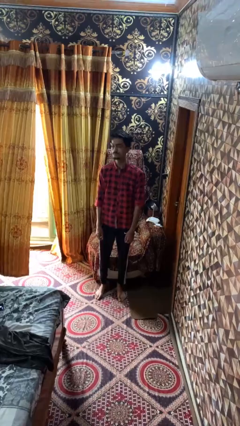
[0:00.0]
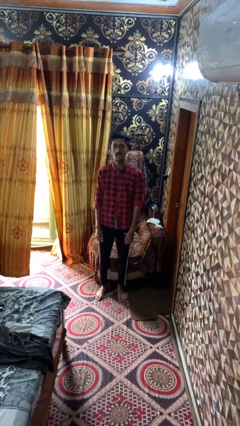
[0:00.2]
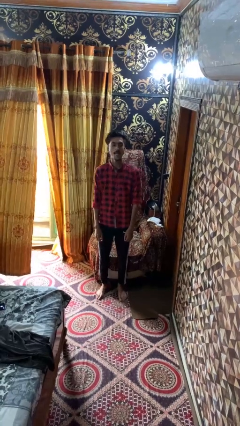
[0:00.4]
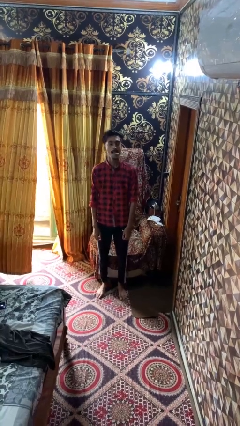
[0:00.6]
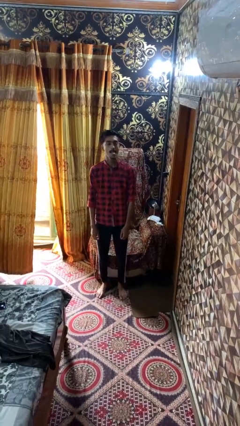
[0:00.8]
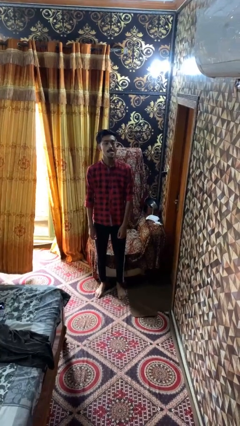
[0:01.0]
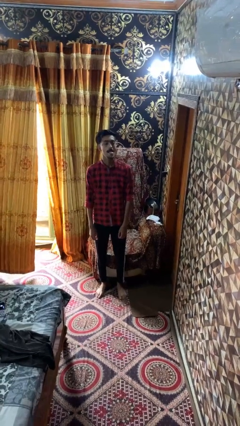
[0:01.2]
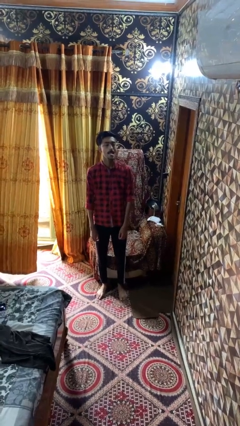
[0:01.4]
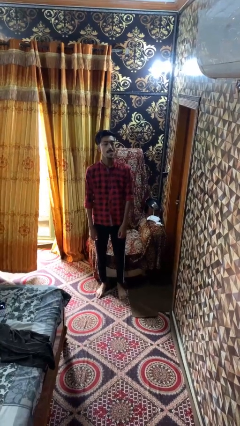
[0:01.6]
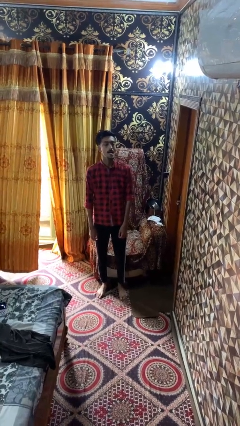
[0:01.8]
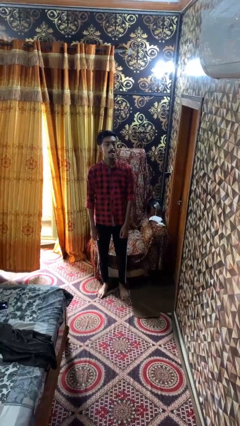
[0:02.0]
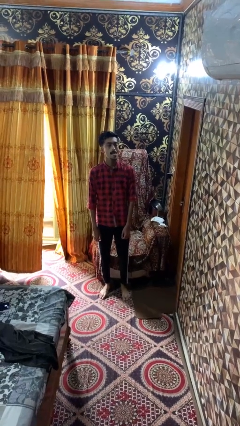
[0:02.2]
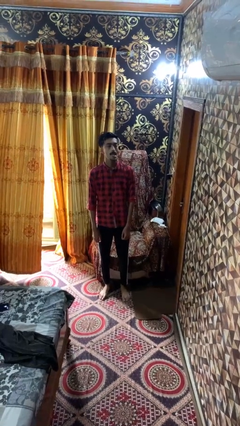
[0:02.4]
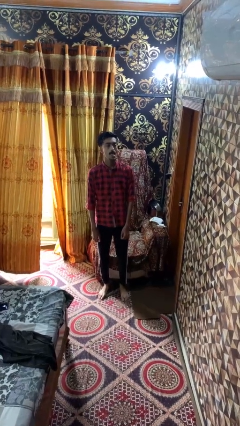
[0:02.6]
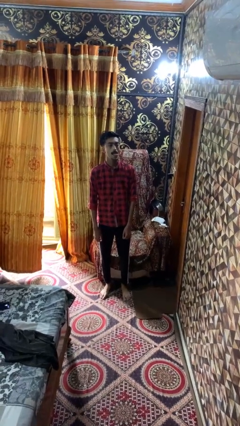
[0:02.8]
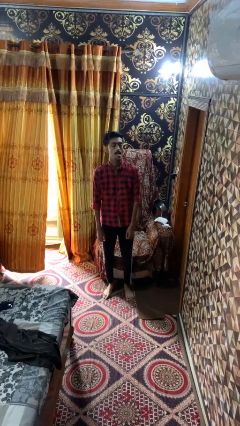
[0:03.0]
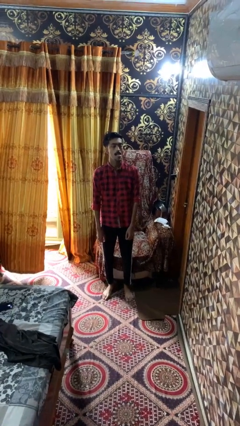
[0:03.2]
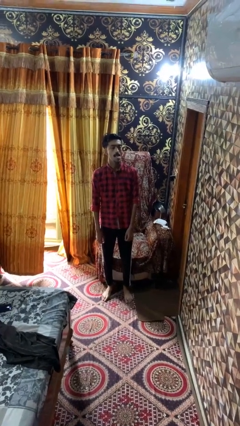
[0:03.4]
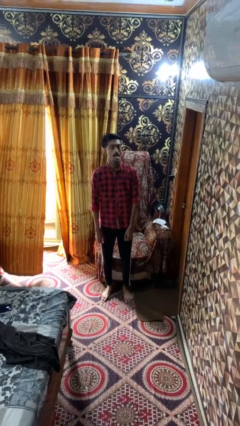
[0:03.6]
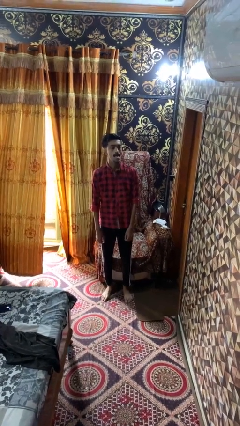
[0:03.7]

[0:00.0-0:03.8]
person sticks out tongue

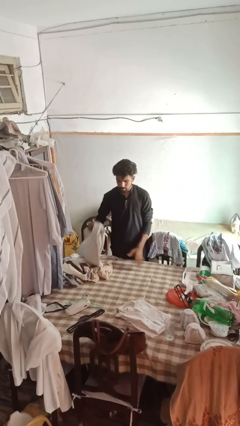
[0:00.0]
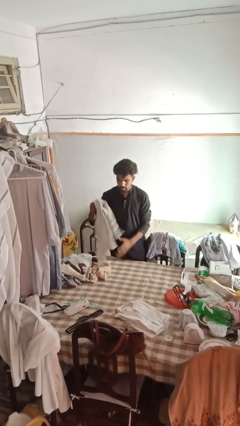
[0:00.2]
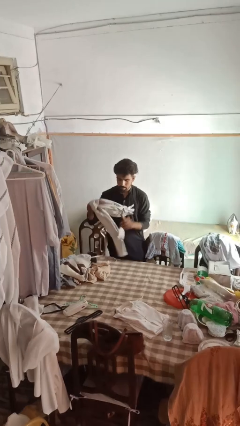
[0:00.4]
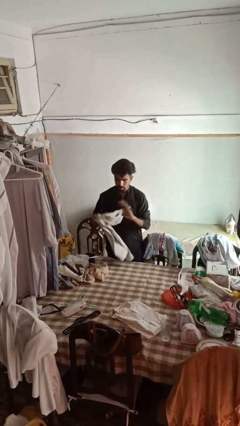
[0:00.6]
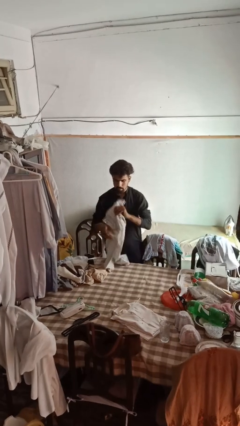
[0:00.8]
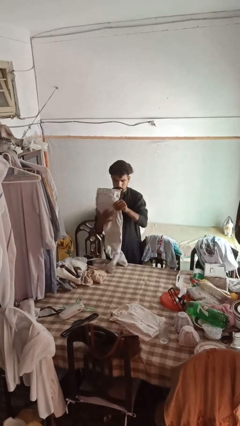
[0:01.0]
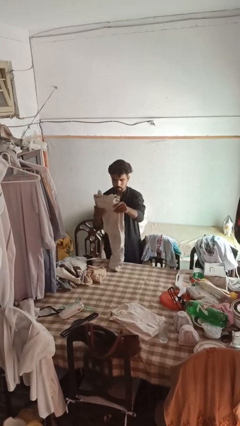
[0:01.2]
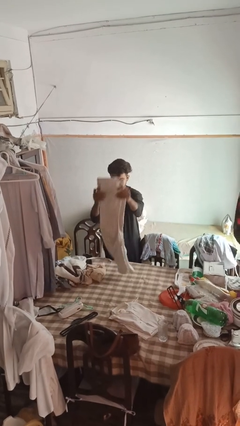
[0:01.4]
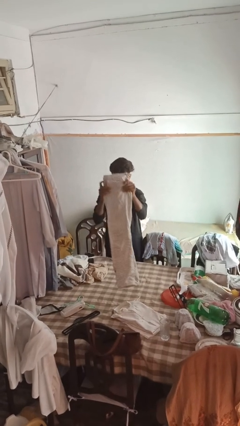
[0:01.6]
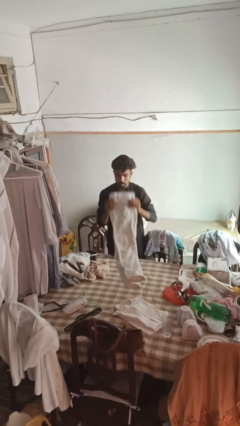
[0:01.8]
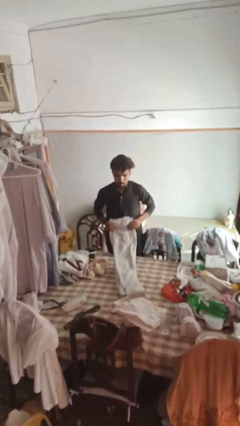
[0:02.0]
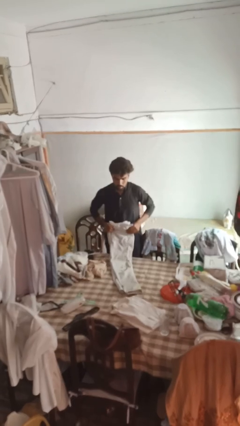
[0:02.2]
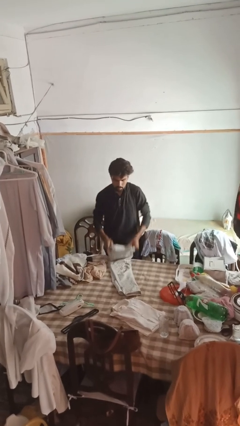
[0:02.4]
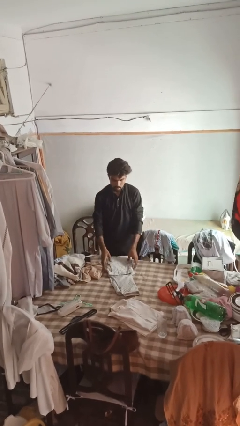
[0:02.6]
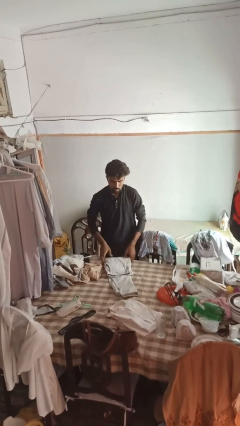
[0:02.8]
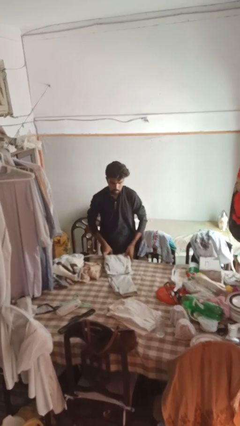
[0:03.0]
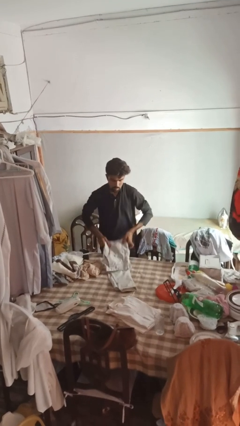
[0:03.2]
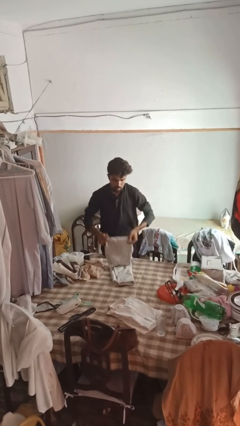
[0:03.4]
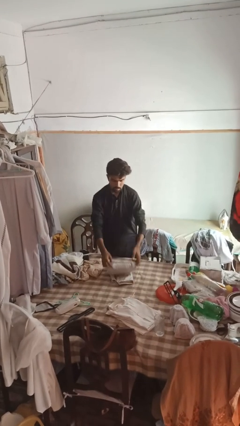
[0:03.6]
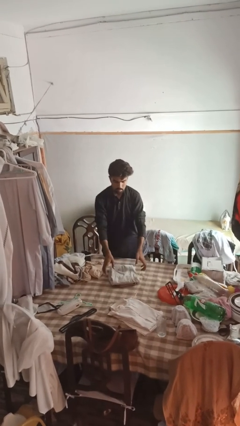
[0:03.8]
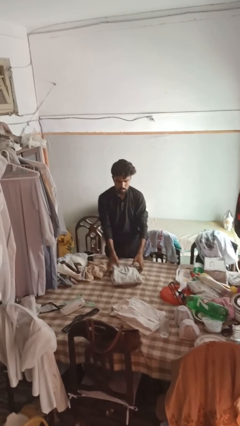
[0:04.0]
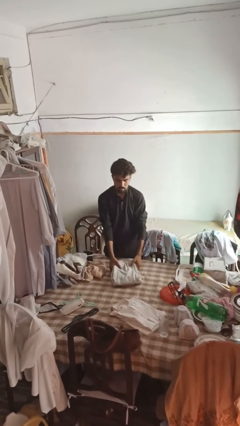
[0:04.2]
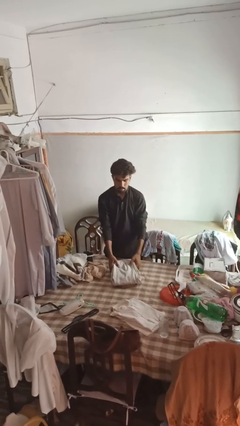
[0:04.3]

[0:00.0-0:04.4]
person folds socks

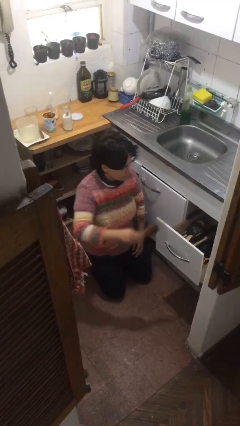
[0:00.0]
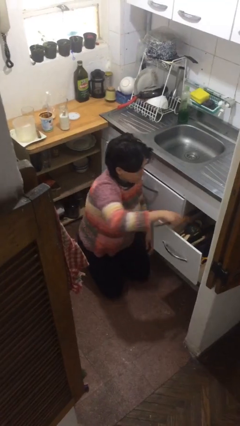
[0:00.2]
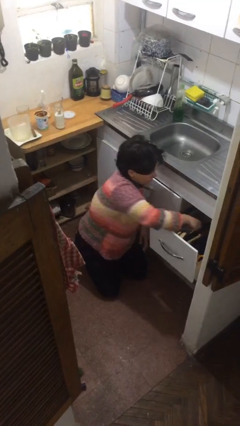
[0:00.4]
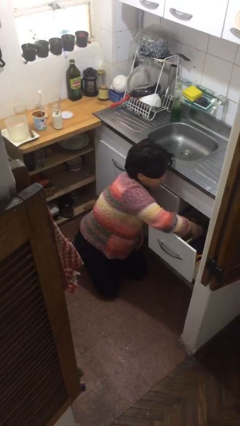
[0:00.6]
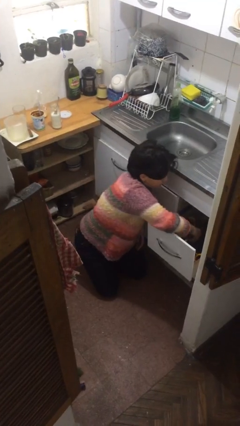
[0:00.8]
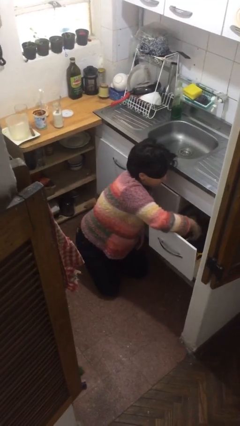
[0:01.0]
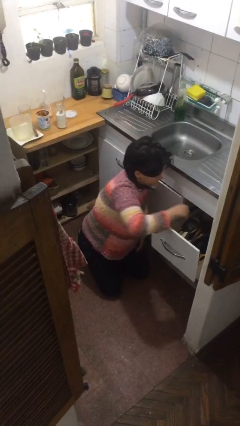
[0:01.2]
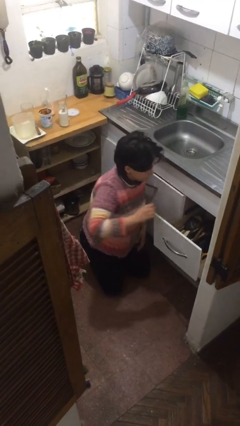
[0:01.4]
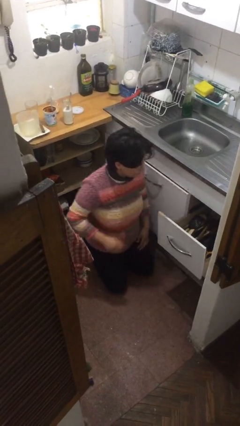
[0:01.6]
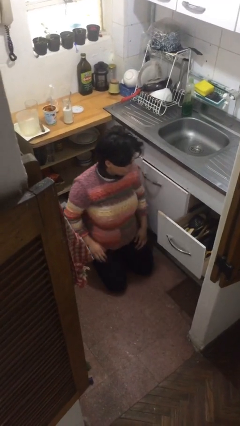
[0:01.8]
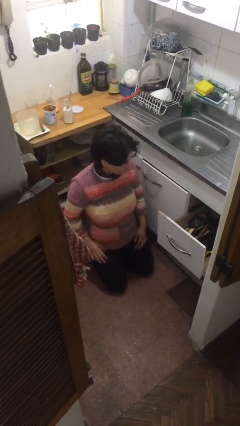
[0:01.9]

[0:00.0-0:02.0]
person puts object into kitchen drawer

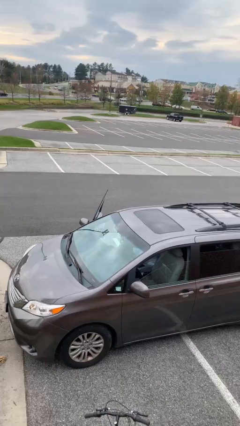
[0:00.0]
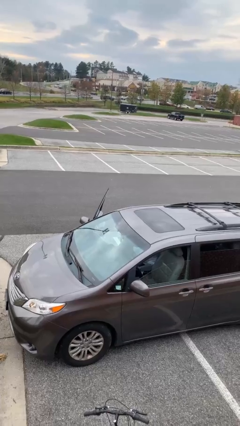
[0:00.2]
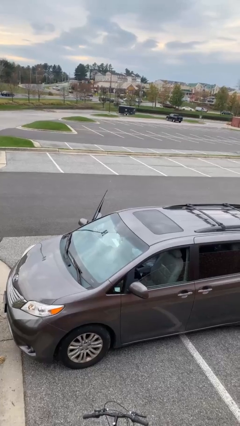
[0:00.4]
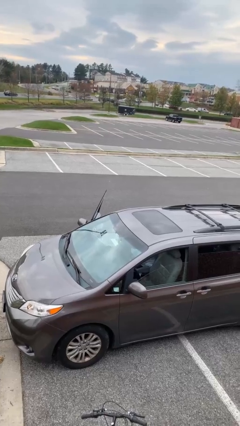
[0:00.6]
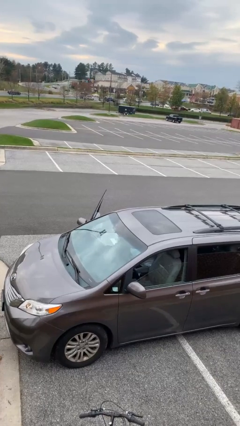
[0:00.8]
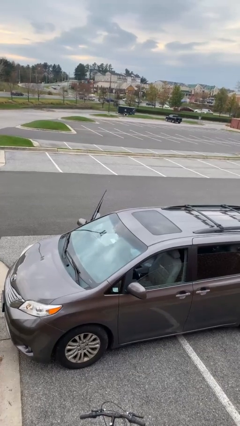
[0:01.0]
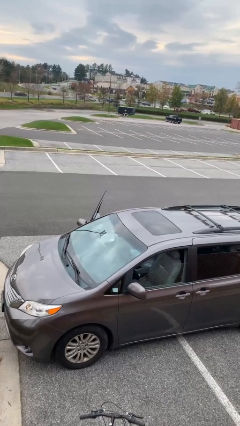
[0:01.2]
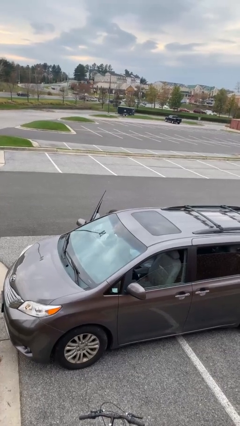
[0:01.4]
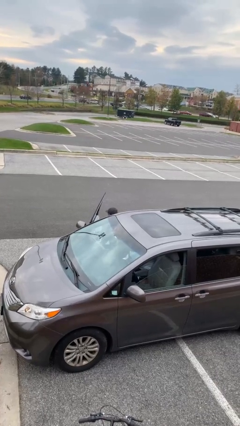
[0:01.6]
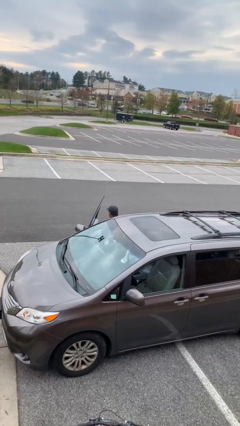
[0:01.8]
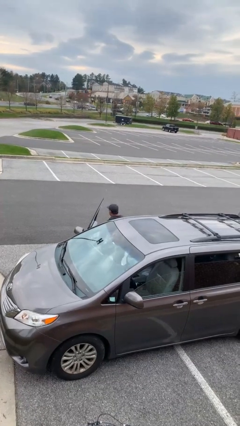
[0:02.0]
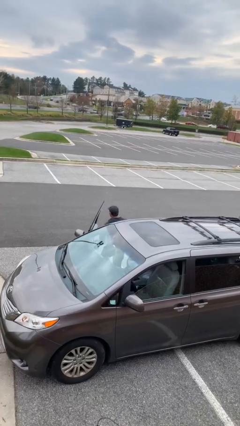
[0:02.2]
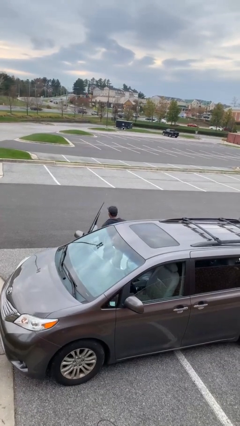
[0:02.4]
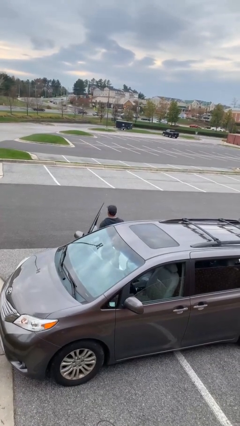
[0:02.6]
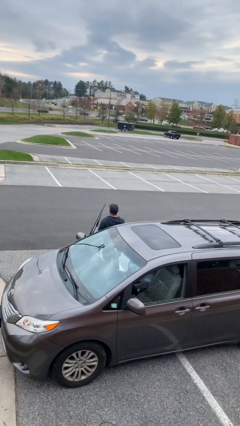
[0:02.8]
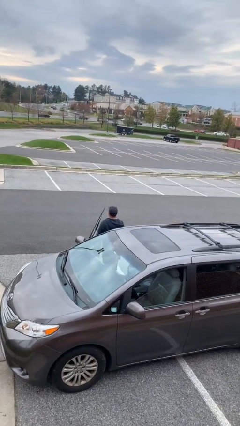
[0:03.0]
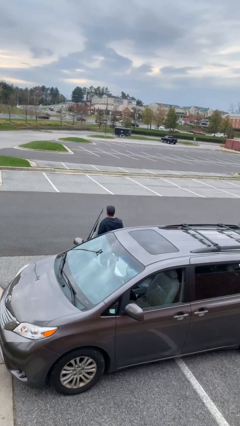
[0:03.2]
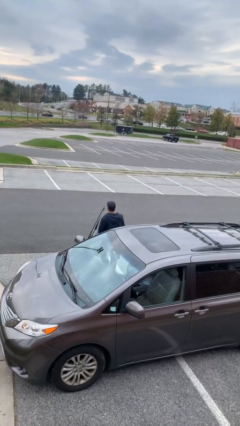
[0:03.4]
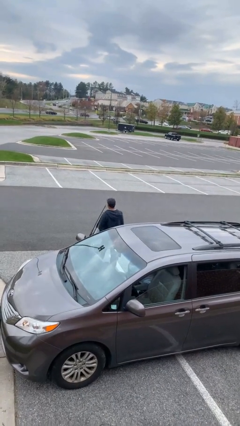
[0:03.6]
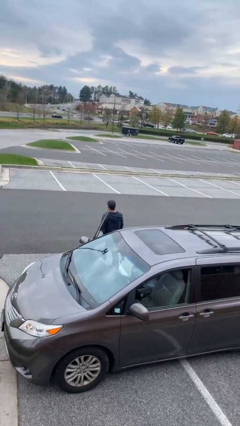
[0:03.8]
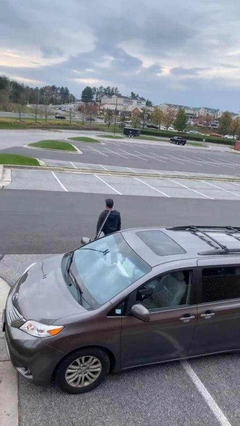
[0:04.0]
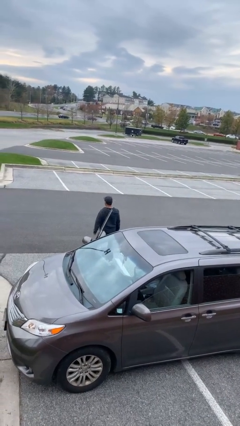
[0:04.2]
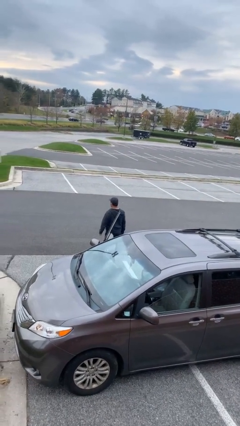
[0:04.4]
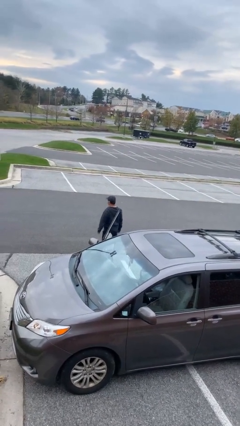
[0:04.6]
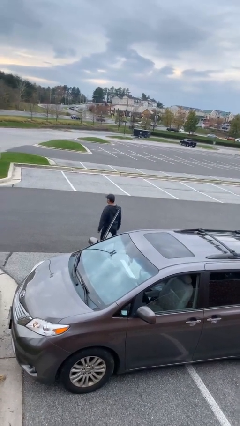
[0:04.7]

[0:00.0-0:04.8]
person exits car

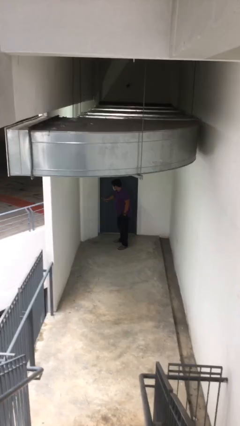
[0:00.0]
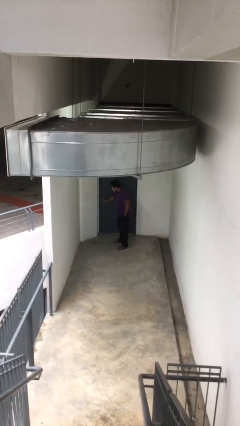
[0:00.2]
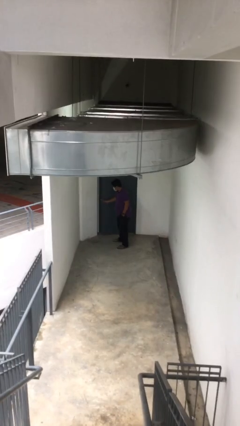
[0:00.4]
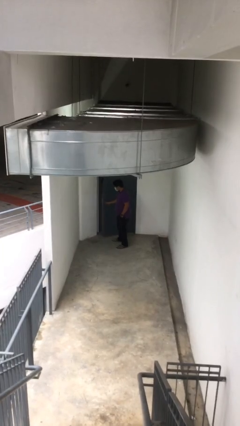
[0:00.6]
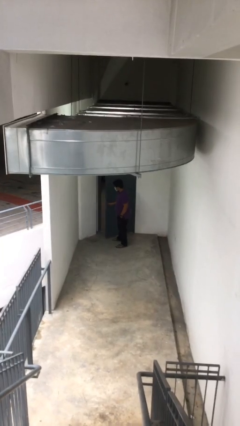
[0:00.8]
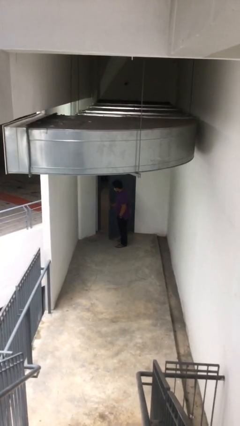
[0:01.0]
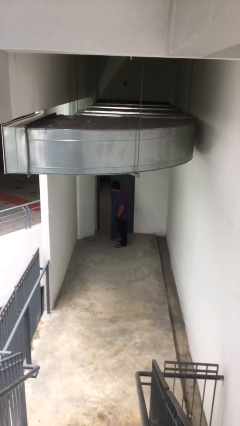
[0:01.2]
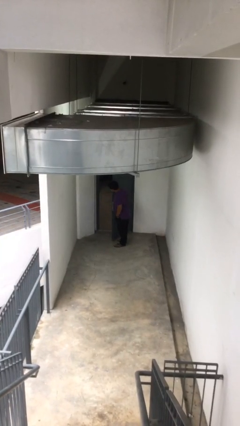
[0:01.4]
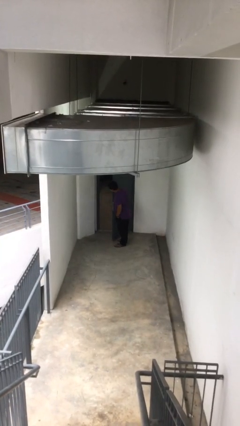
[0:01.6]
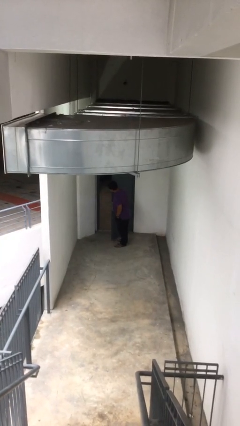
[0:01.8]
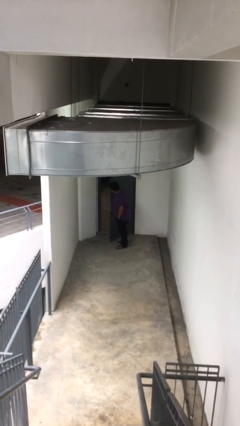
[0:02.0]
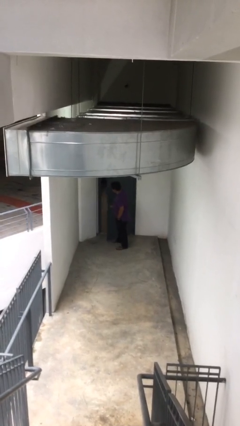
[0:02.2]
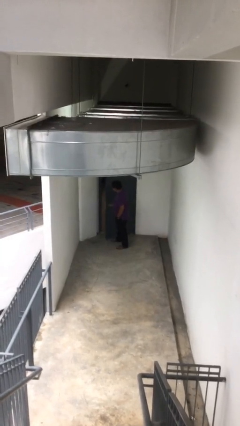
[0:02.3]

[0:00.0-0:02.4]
person opens facility door

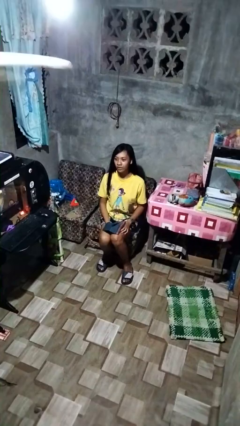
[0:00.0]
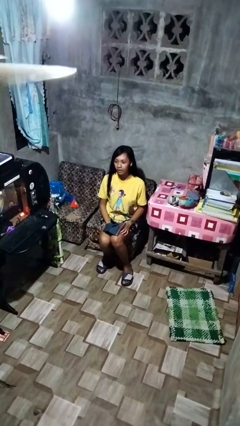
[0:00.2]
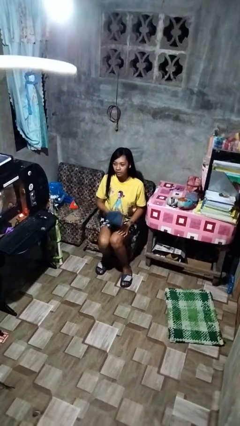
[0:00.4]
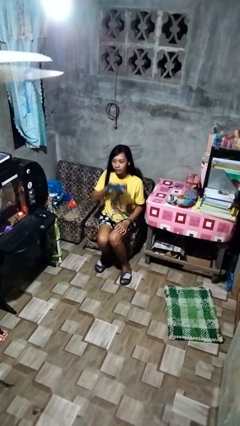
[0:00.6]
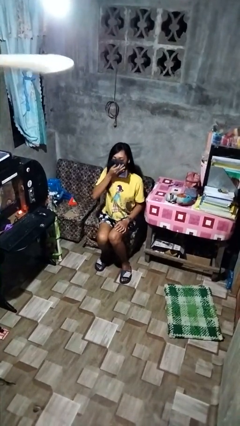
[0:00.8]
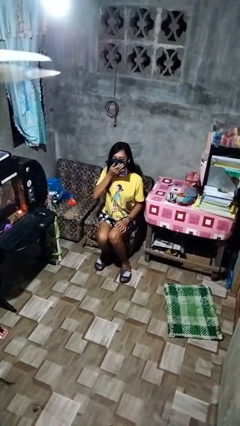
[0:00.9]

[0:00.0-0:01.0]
person blows nose
